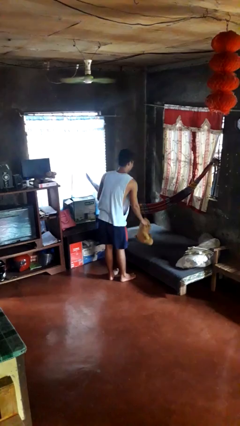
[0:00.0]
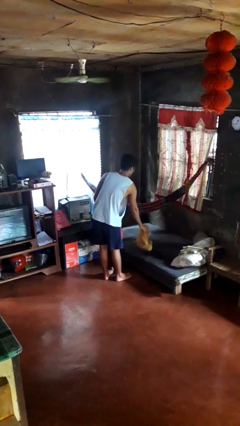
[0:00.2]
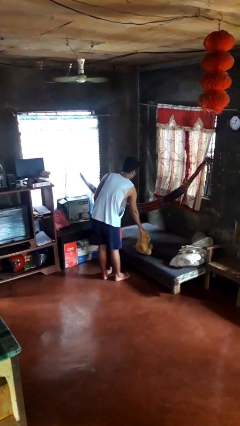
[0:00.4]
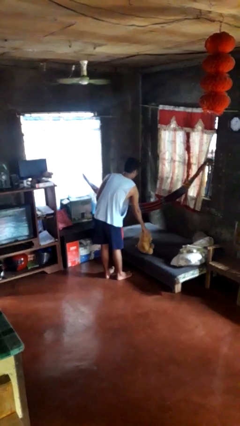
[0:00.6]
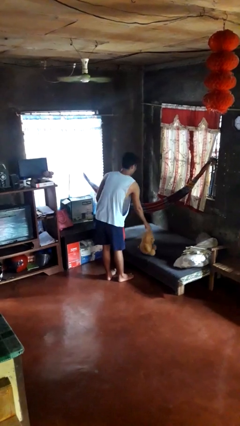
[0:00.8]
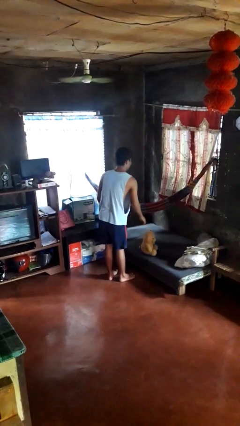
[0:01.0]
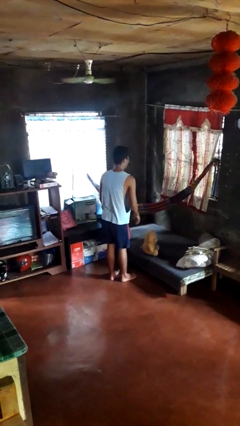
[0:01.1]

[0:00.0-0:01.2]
person puts down object on bed

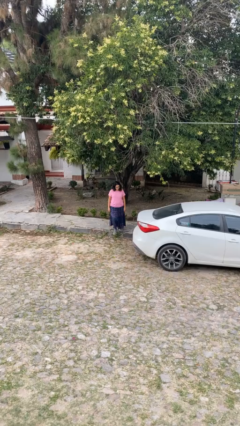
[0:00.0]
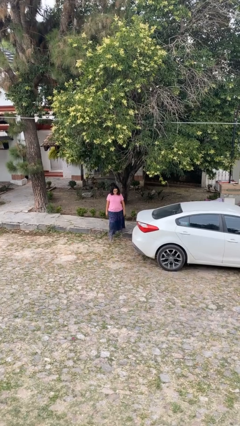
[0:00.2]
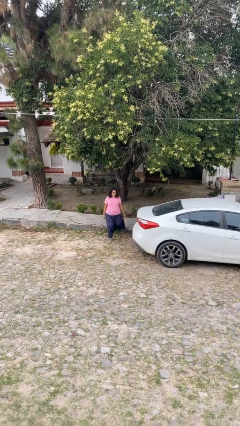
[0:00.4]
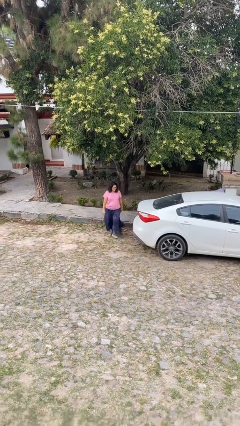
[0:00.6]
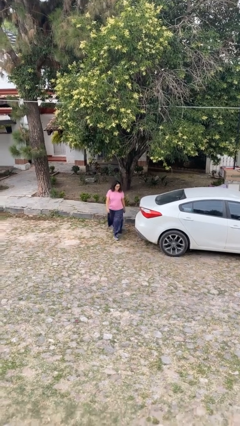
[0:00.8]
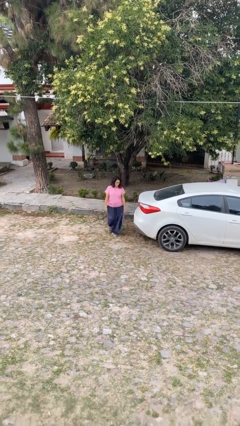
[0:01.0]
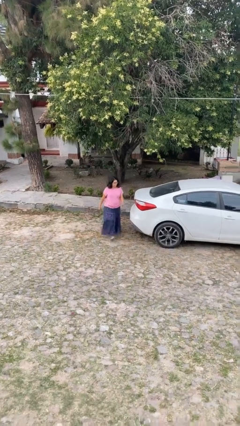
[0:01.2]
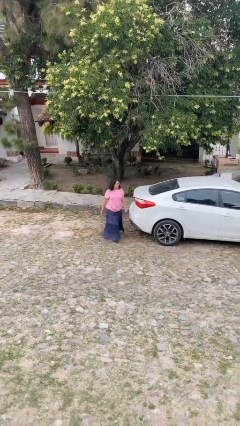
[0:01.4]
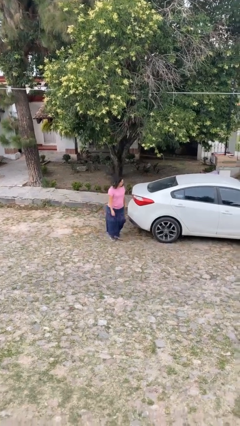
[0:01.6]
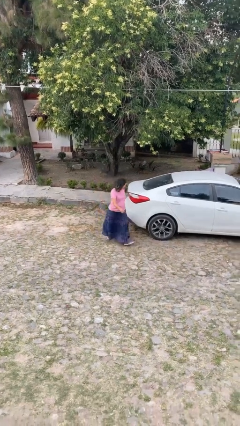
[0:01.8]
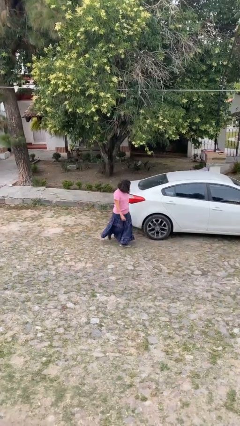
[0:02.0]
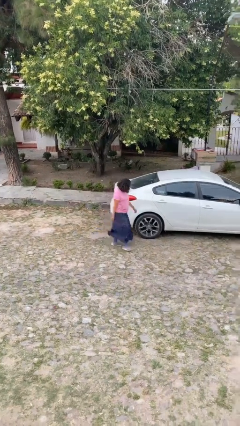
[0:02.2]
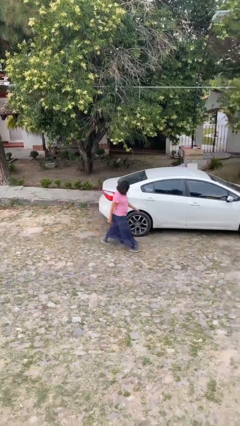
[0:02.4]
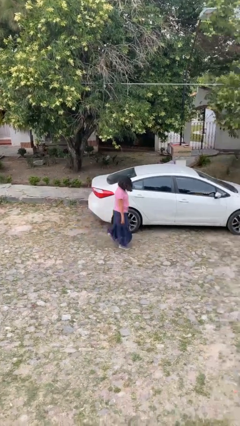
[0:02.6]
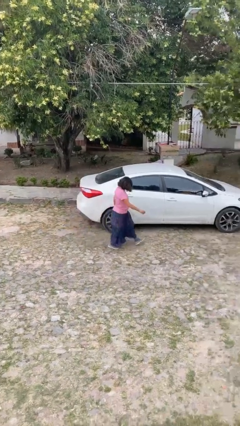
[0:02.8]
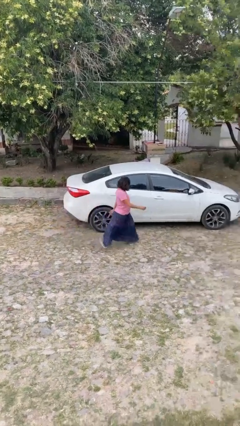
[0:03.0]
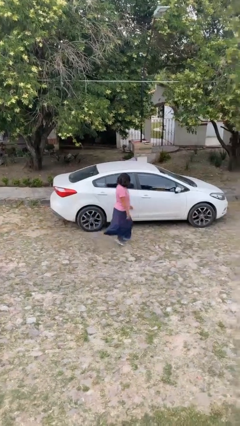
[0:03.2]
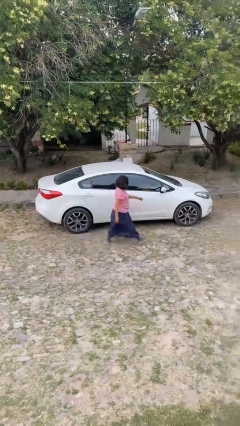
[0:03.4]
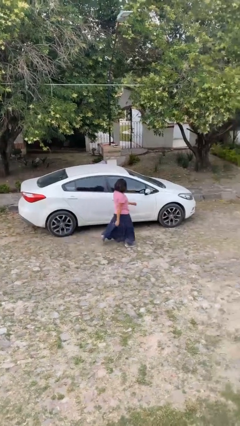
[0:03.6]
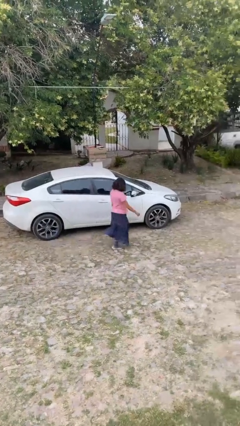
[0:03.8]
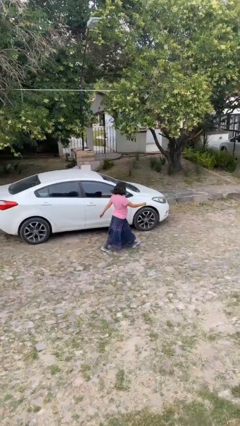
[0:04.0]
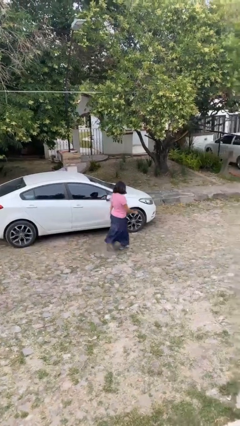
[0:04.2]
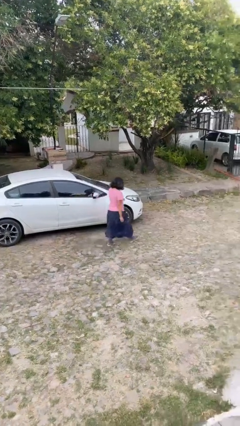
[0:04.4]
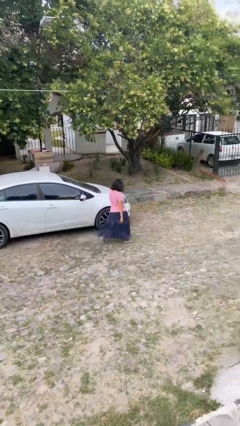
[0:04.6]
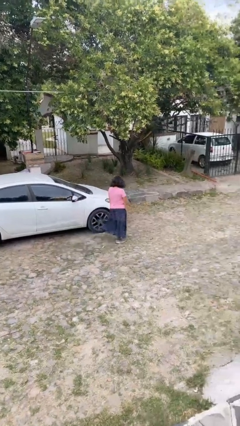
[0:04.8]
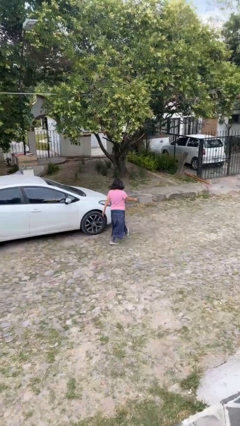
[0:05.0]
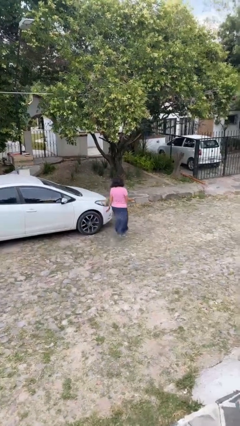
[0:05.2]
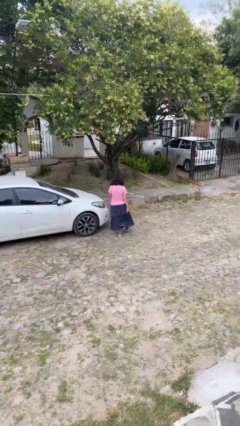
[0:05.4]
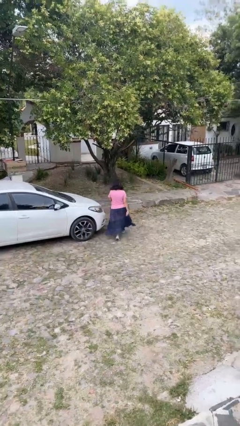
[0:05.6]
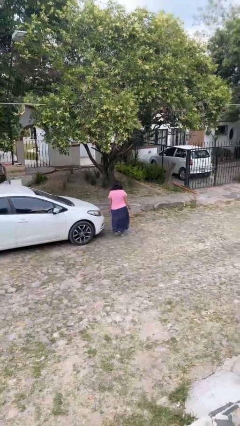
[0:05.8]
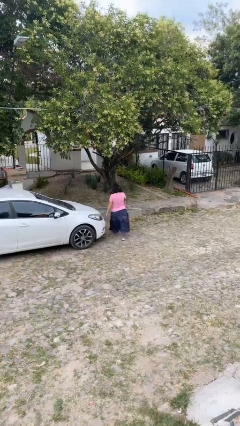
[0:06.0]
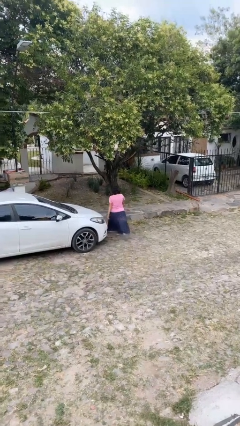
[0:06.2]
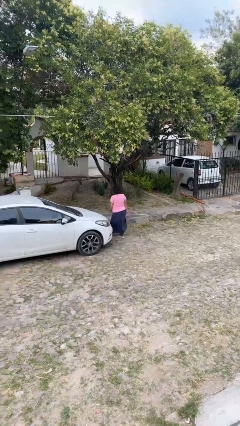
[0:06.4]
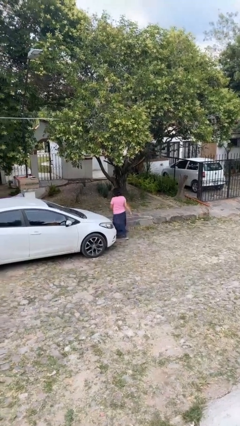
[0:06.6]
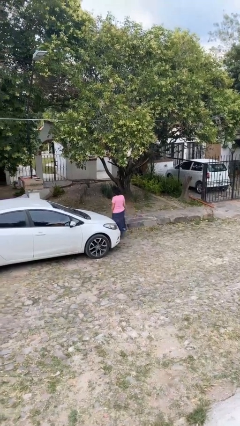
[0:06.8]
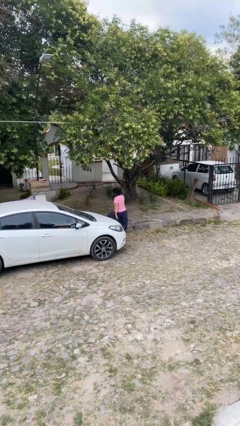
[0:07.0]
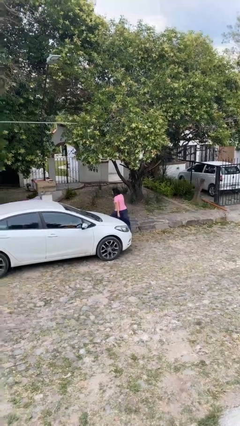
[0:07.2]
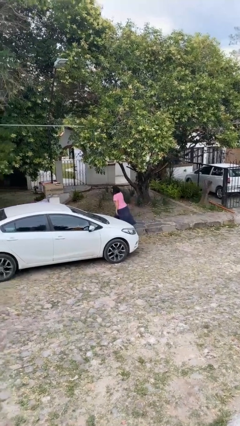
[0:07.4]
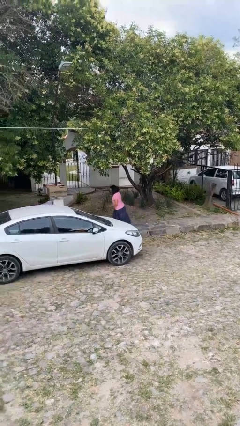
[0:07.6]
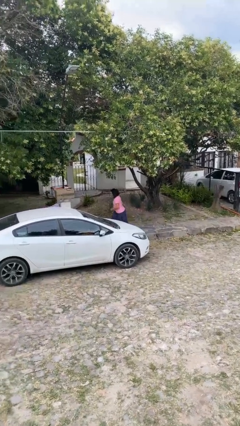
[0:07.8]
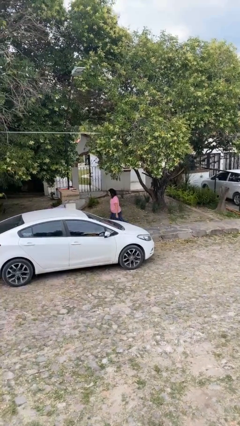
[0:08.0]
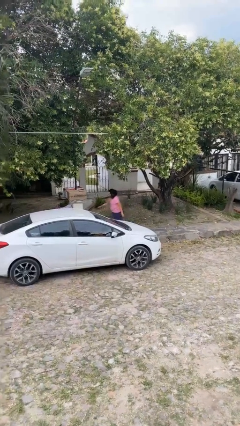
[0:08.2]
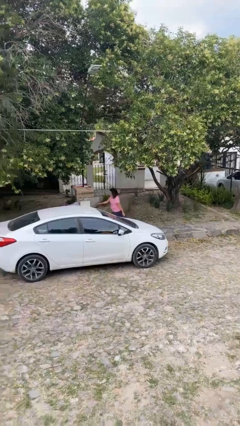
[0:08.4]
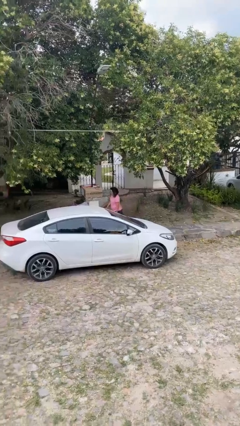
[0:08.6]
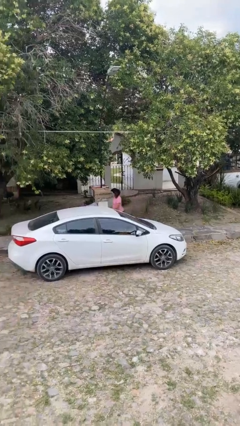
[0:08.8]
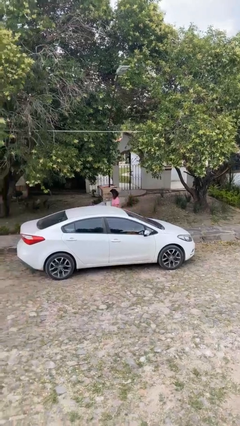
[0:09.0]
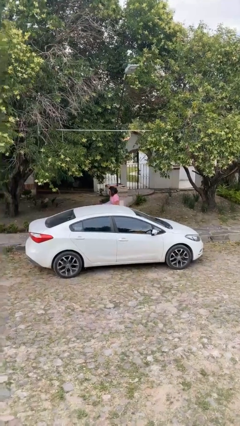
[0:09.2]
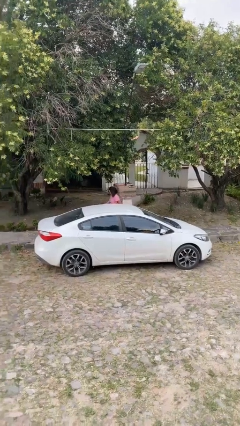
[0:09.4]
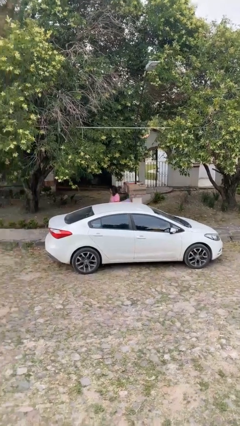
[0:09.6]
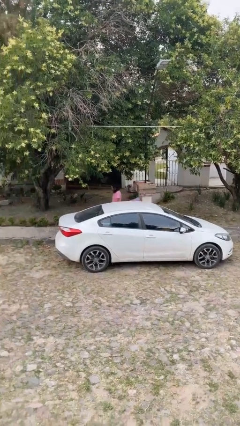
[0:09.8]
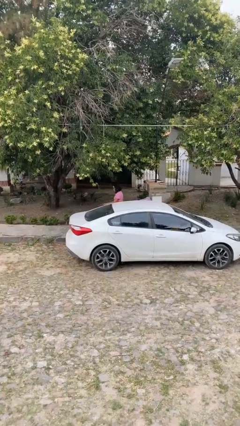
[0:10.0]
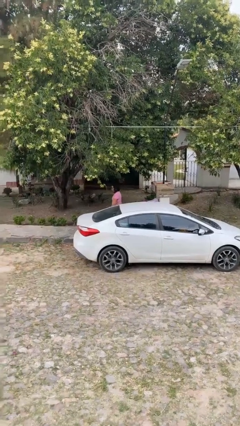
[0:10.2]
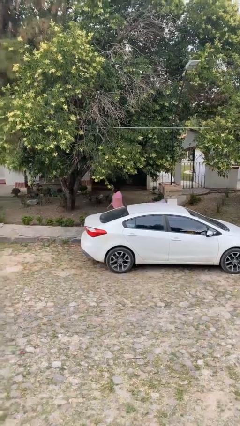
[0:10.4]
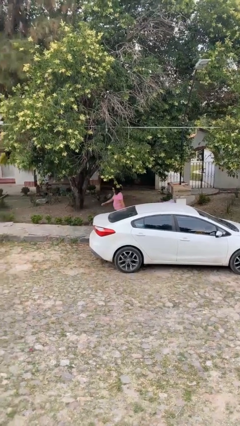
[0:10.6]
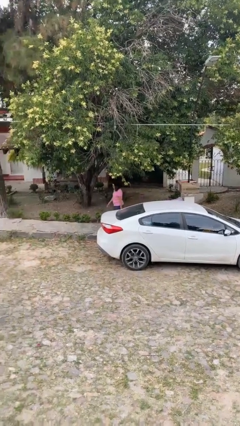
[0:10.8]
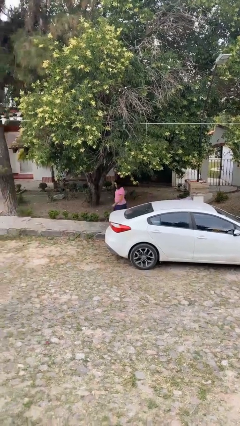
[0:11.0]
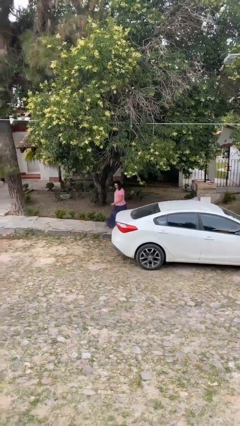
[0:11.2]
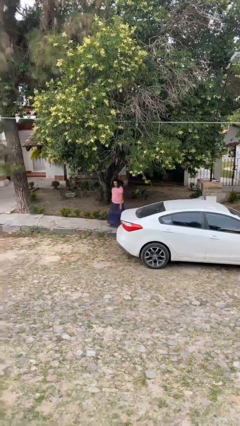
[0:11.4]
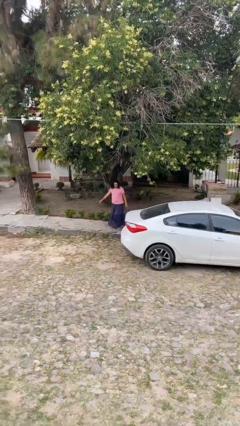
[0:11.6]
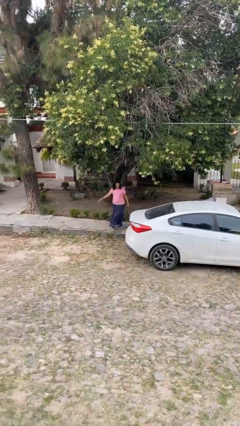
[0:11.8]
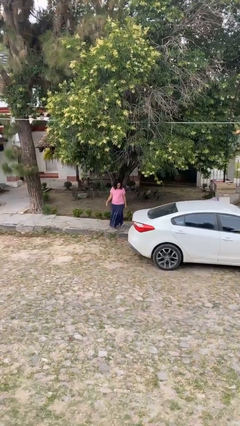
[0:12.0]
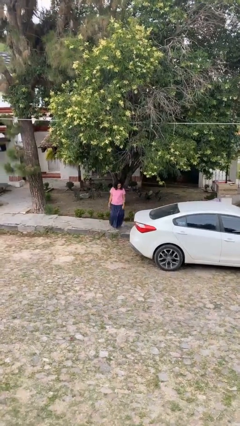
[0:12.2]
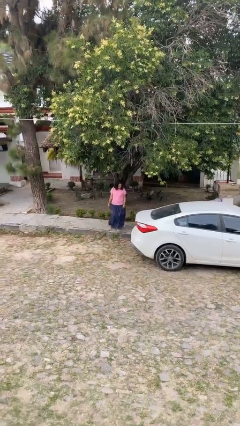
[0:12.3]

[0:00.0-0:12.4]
person walks around car

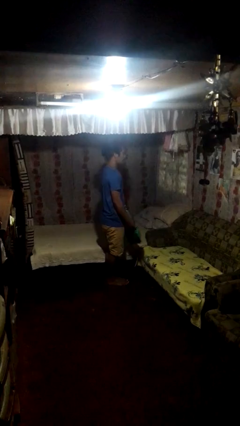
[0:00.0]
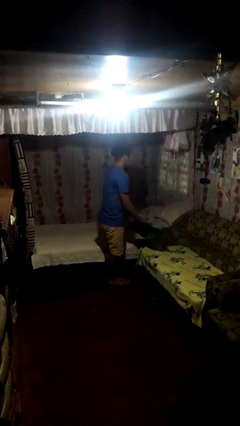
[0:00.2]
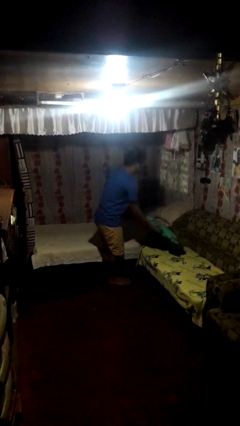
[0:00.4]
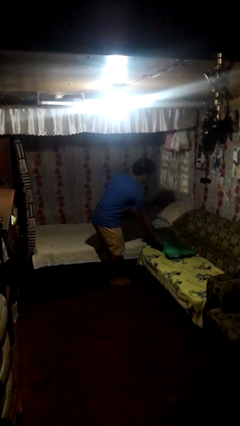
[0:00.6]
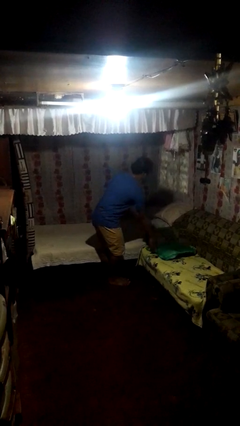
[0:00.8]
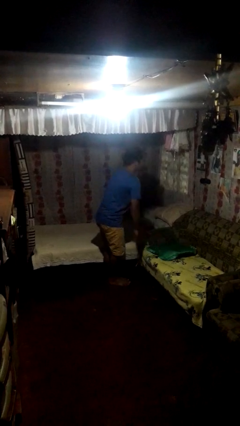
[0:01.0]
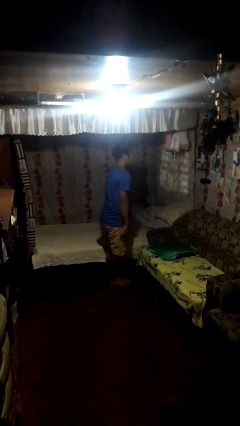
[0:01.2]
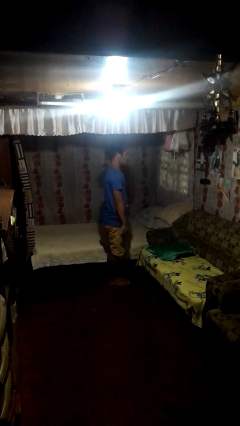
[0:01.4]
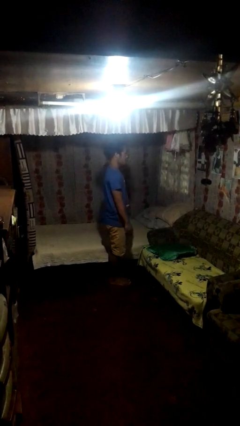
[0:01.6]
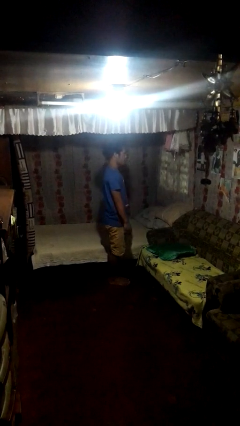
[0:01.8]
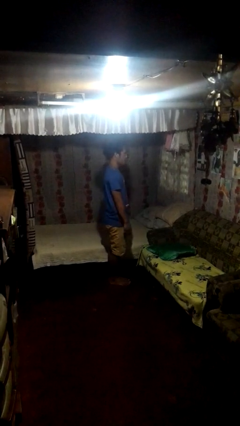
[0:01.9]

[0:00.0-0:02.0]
person puts down object on couch

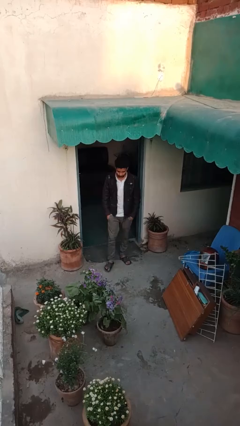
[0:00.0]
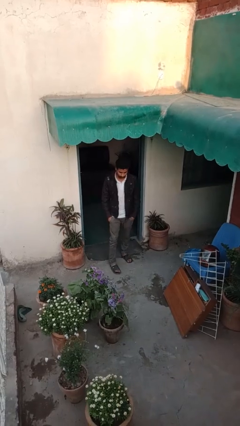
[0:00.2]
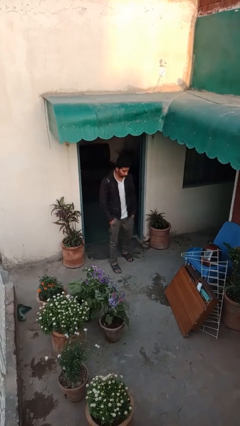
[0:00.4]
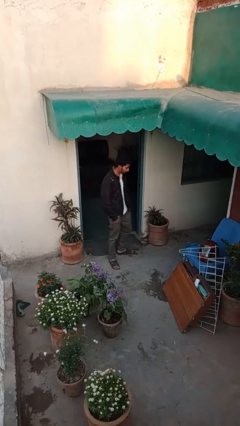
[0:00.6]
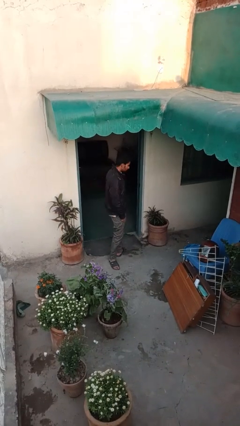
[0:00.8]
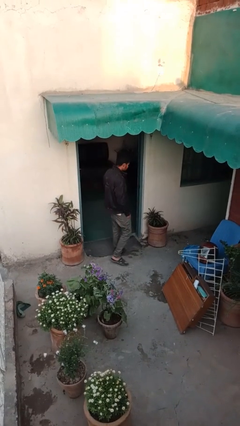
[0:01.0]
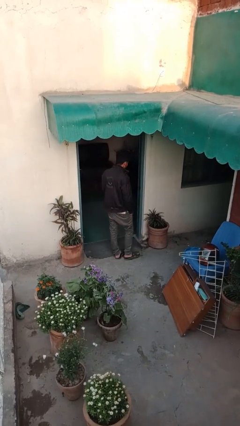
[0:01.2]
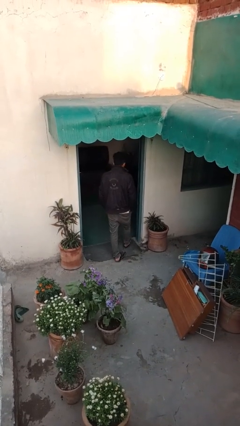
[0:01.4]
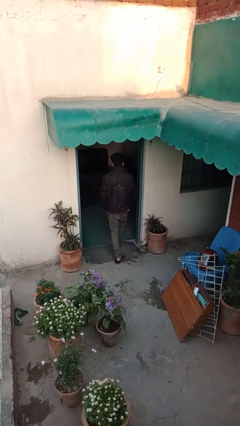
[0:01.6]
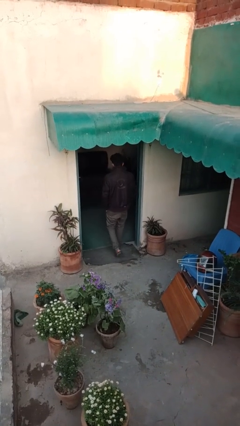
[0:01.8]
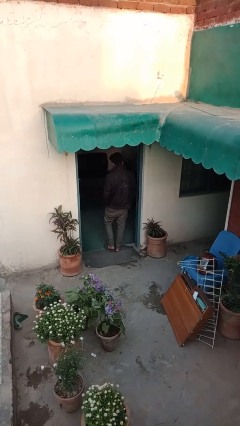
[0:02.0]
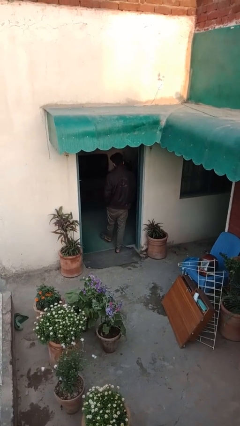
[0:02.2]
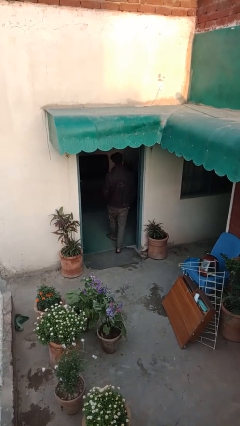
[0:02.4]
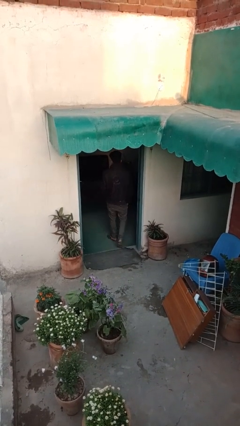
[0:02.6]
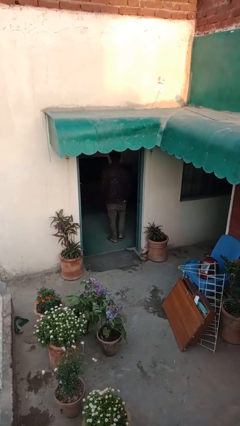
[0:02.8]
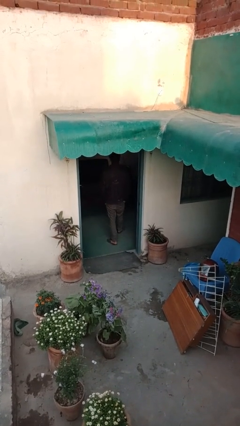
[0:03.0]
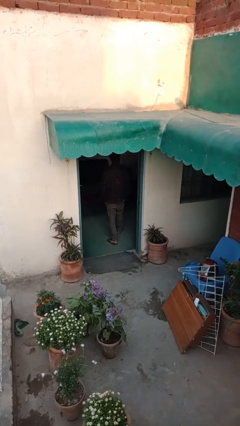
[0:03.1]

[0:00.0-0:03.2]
person exits scene through structure
